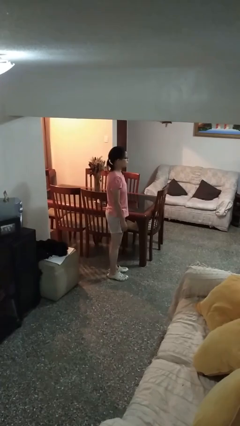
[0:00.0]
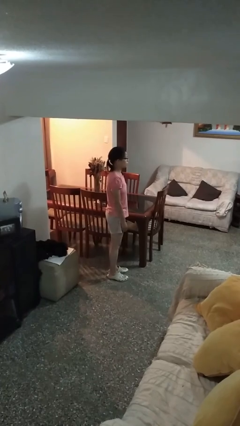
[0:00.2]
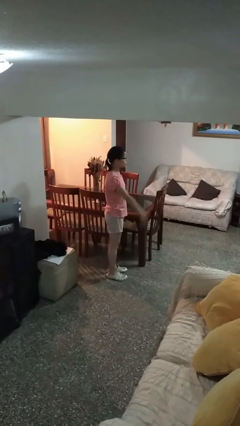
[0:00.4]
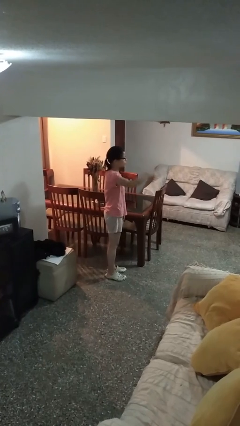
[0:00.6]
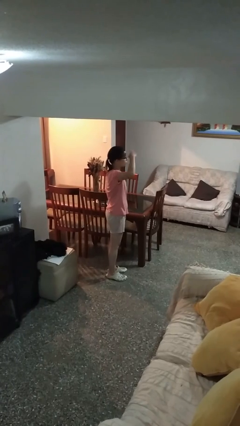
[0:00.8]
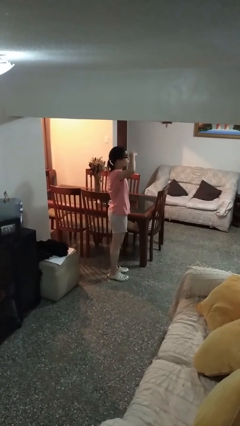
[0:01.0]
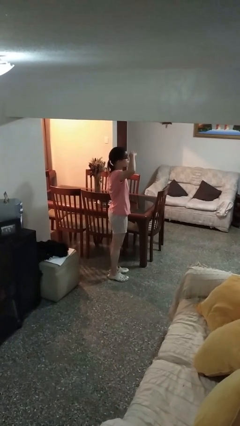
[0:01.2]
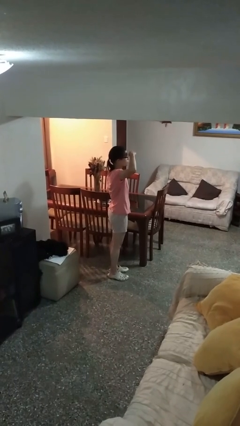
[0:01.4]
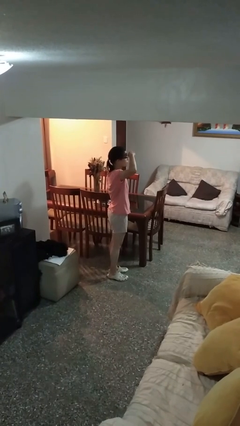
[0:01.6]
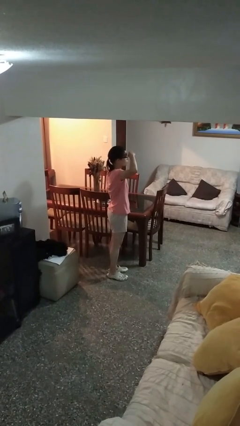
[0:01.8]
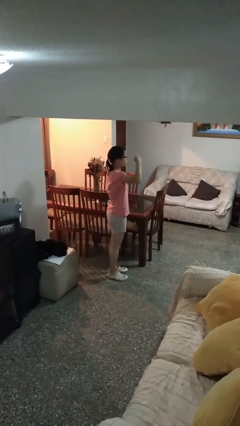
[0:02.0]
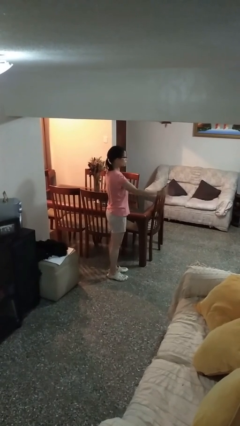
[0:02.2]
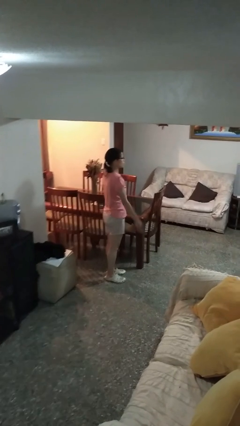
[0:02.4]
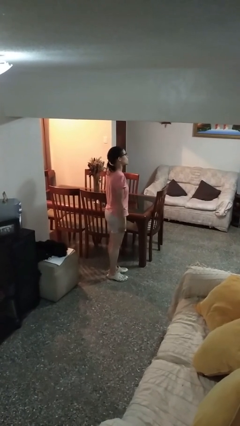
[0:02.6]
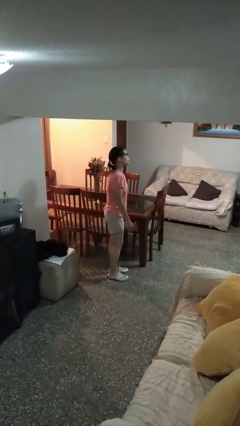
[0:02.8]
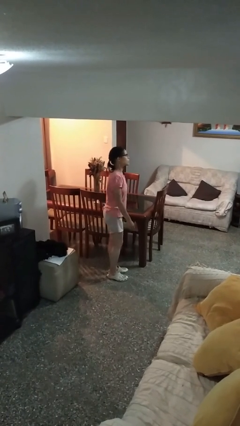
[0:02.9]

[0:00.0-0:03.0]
person salutes

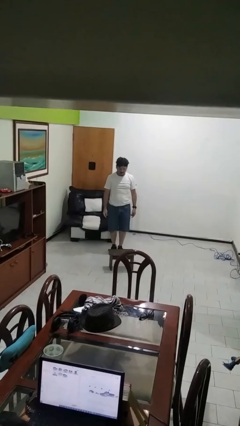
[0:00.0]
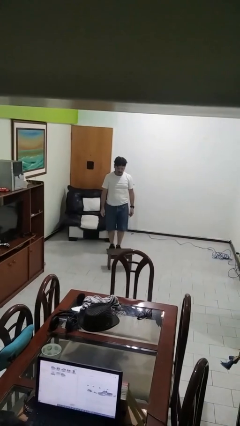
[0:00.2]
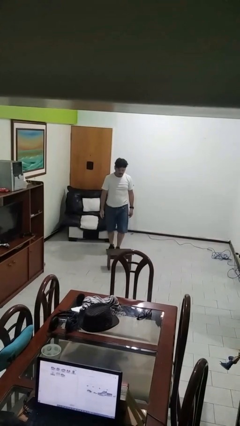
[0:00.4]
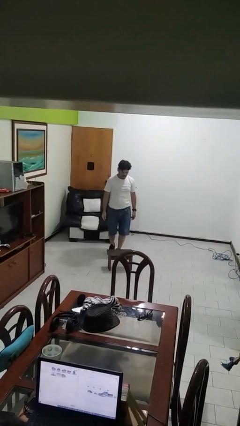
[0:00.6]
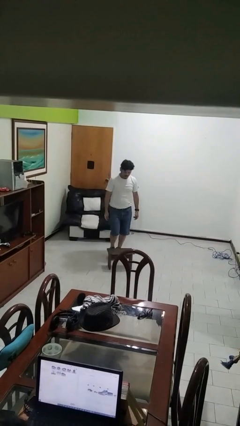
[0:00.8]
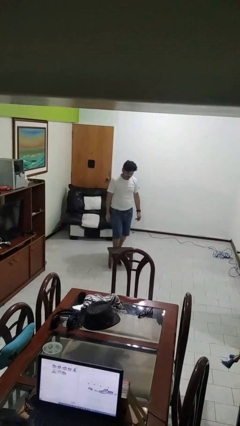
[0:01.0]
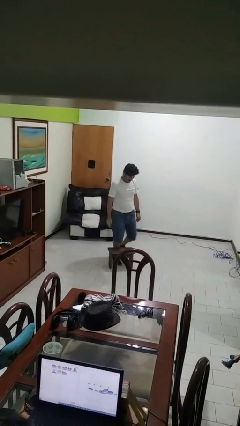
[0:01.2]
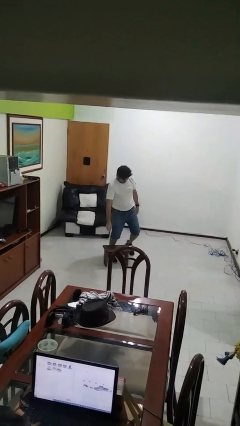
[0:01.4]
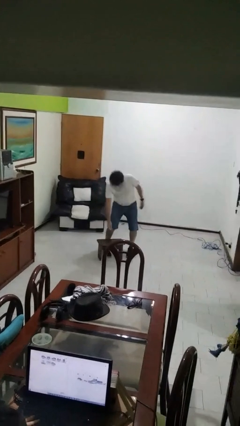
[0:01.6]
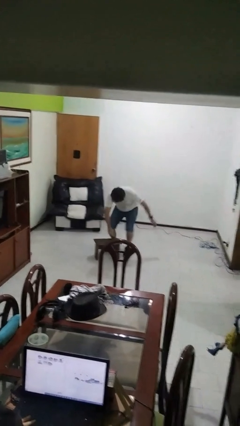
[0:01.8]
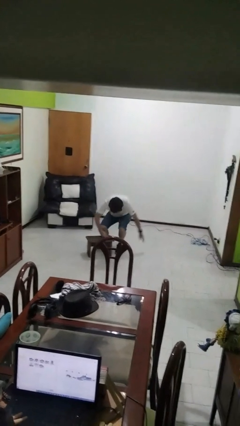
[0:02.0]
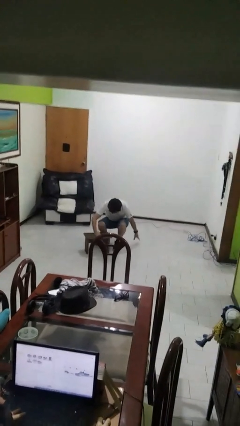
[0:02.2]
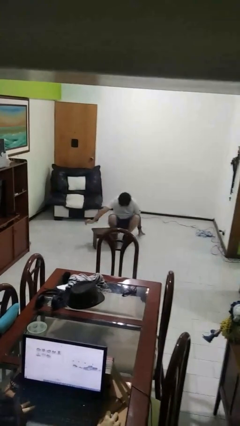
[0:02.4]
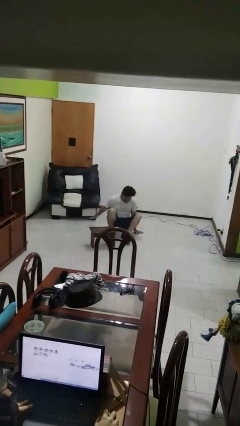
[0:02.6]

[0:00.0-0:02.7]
person trips on object on floor

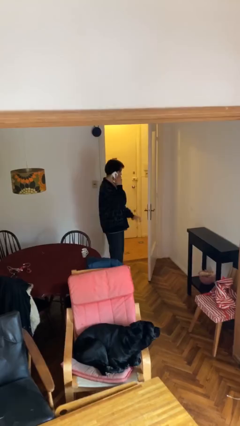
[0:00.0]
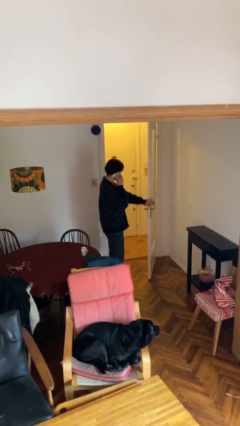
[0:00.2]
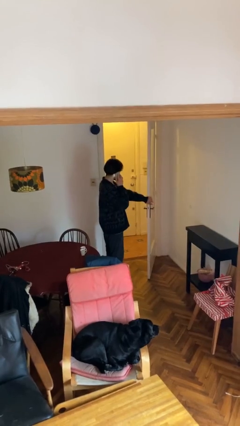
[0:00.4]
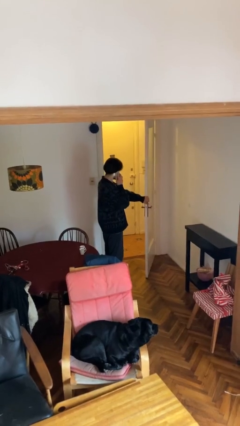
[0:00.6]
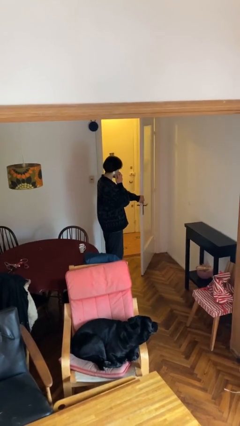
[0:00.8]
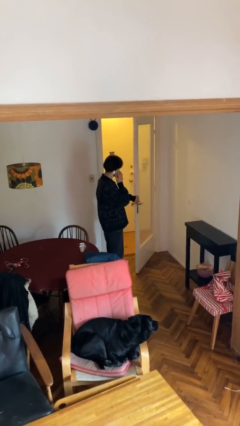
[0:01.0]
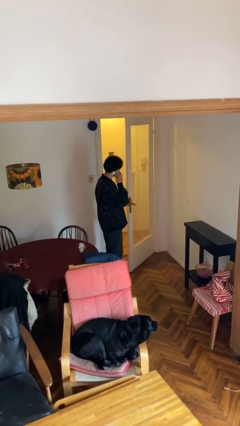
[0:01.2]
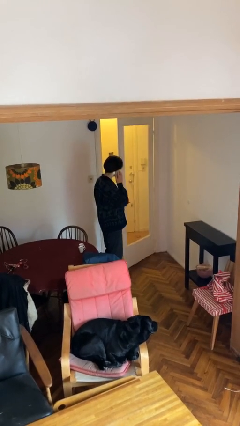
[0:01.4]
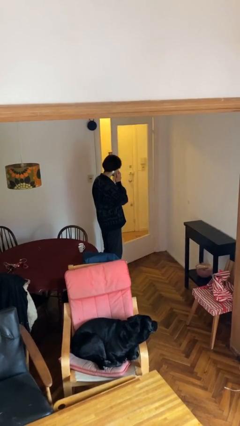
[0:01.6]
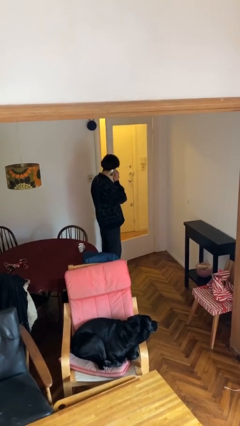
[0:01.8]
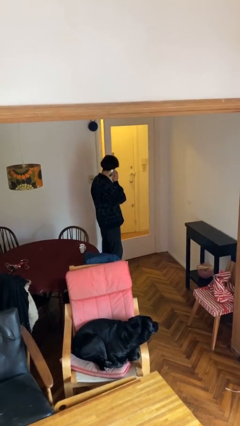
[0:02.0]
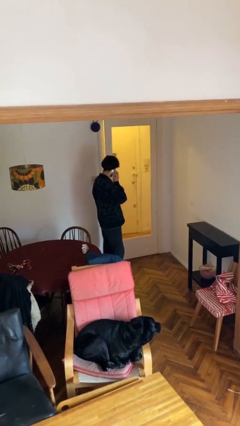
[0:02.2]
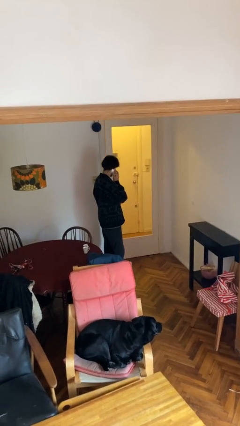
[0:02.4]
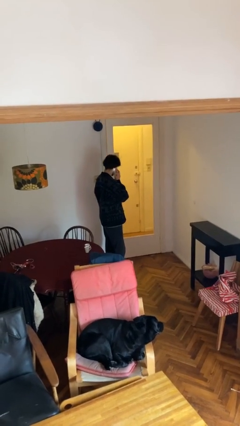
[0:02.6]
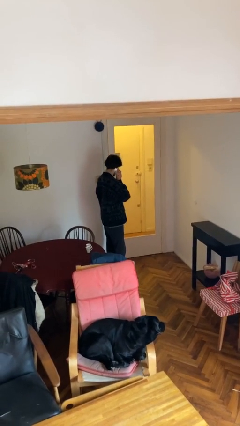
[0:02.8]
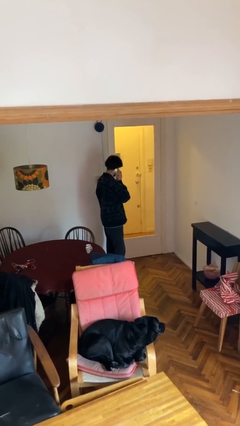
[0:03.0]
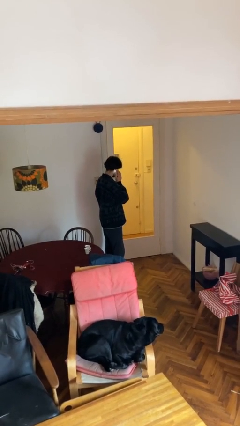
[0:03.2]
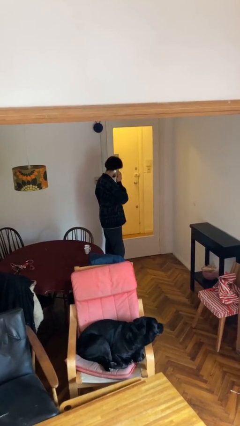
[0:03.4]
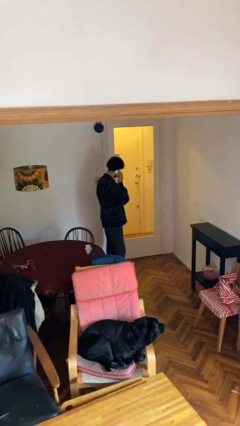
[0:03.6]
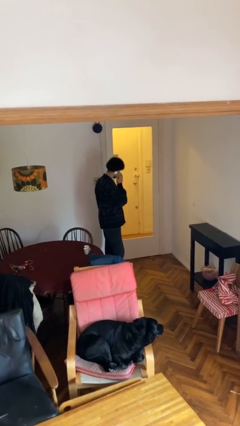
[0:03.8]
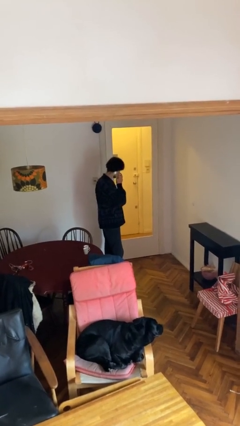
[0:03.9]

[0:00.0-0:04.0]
person closes facility door

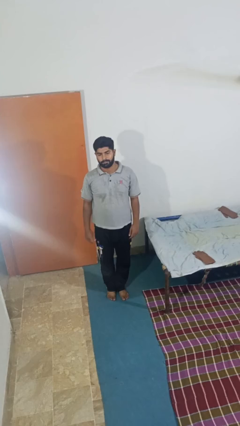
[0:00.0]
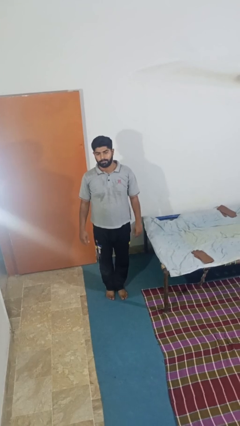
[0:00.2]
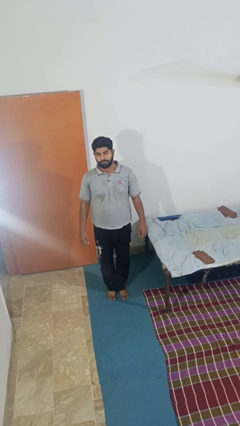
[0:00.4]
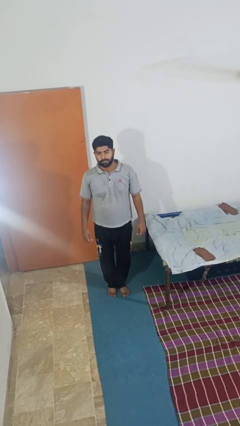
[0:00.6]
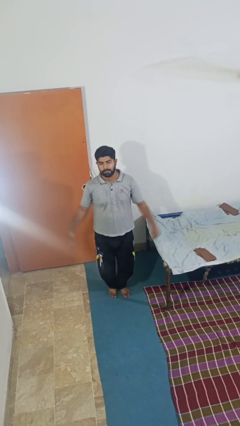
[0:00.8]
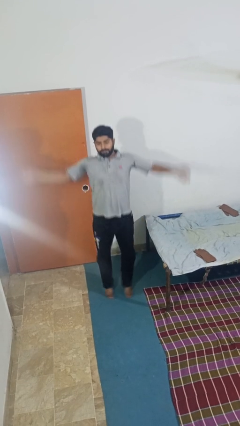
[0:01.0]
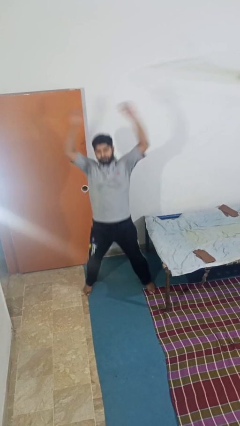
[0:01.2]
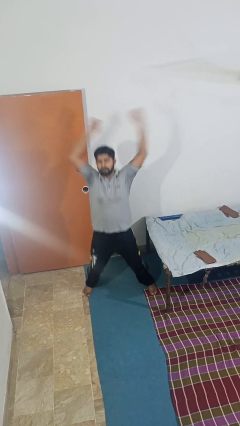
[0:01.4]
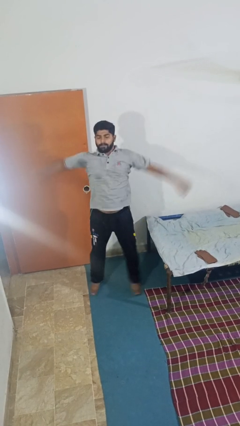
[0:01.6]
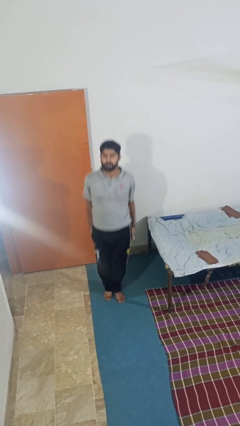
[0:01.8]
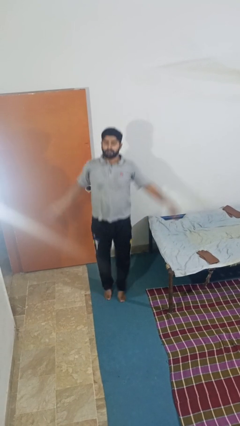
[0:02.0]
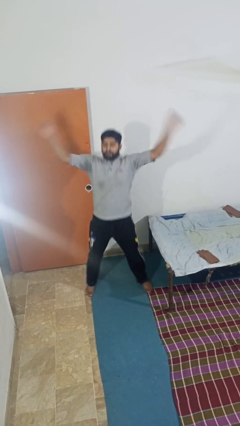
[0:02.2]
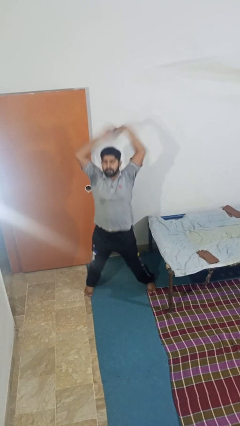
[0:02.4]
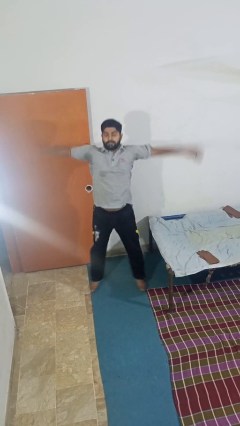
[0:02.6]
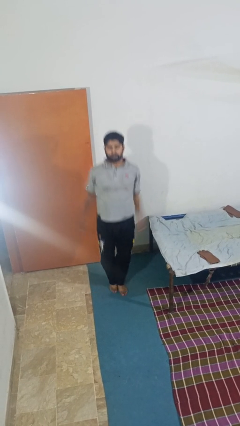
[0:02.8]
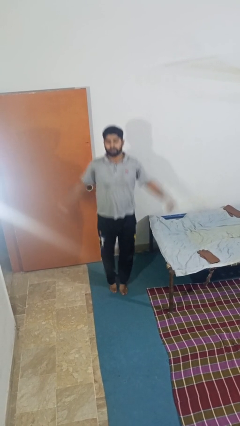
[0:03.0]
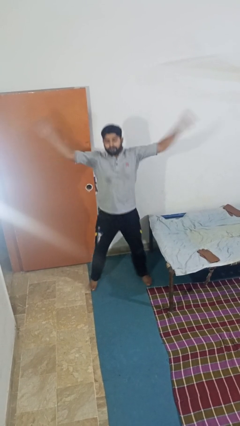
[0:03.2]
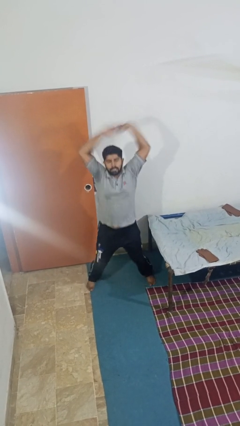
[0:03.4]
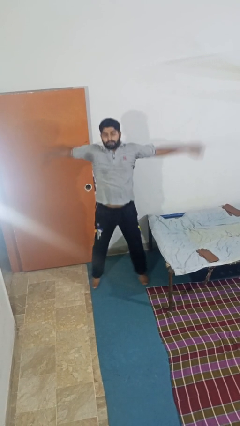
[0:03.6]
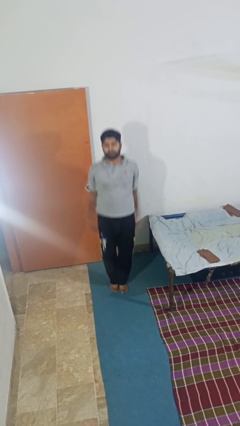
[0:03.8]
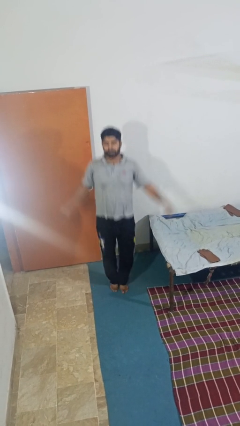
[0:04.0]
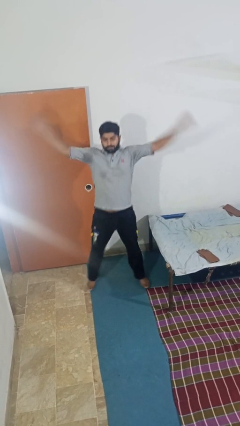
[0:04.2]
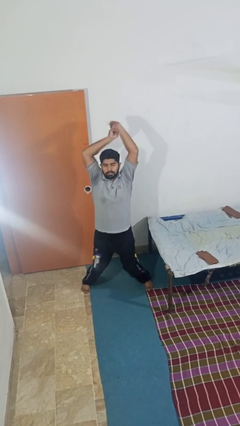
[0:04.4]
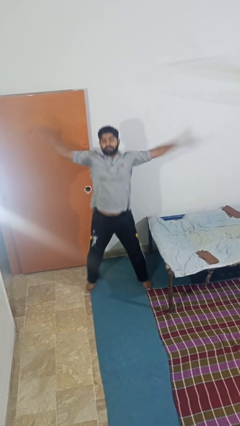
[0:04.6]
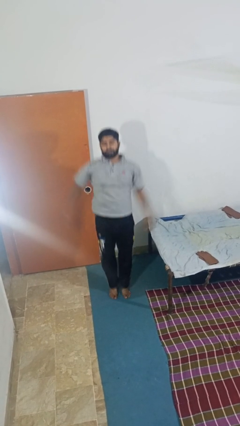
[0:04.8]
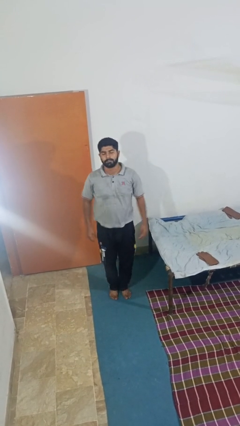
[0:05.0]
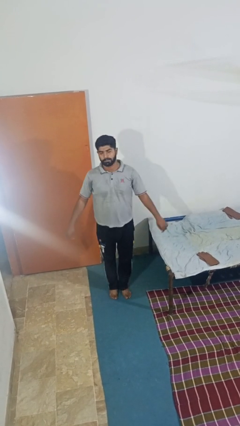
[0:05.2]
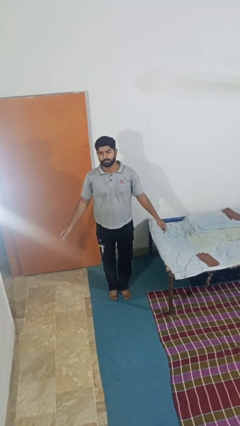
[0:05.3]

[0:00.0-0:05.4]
person exercises with jumping jacks

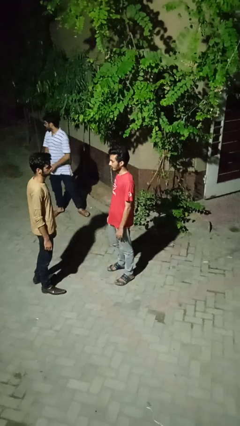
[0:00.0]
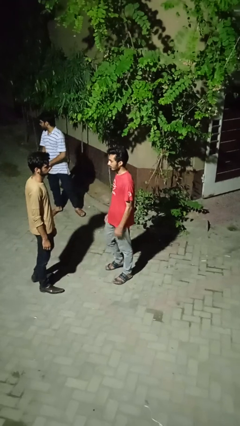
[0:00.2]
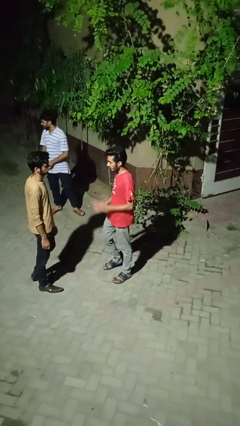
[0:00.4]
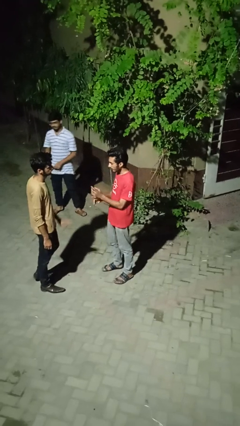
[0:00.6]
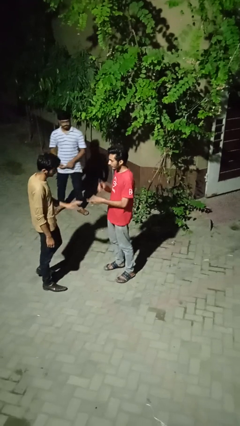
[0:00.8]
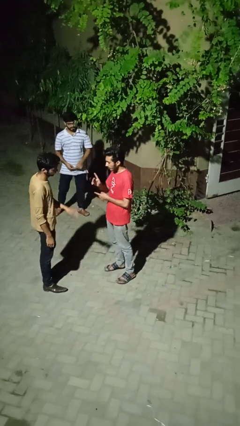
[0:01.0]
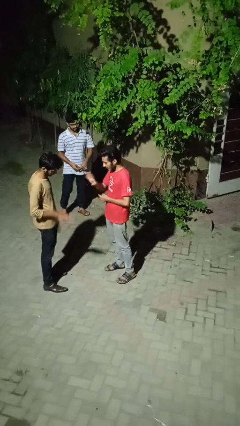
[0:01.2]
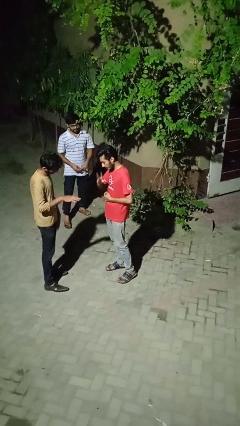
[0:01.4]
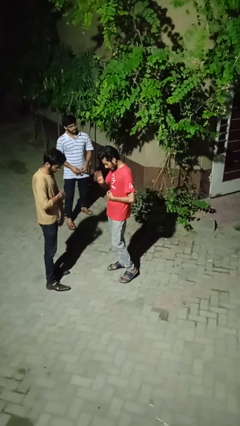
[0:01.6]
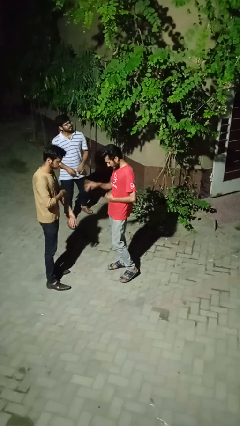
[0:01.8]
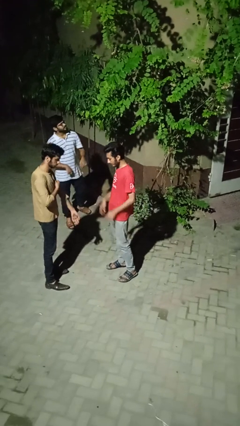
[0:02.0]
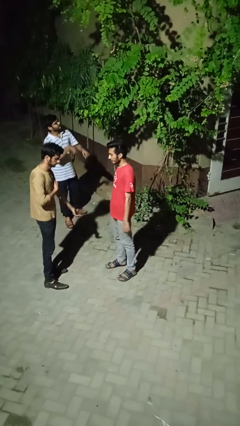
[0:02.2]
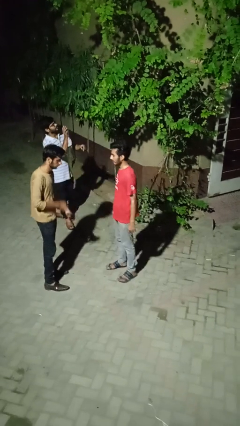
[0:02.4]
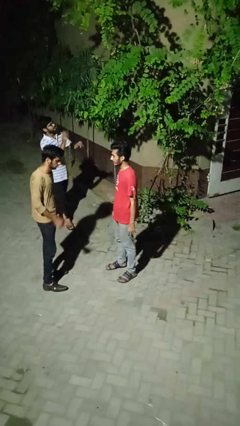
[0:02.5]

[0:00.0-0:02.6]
person talks to person
